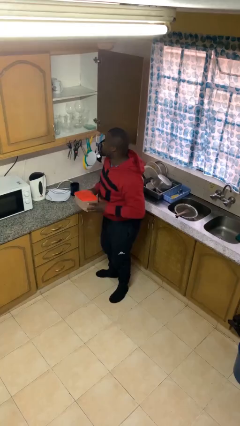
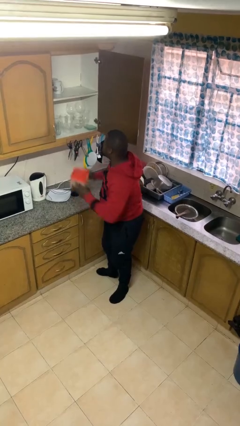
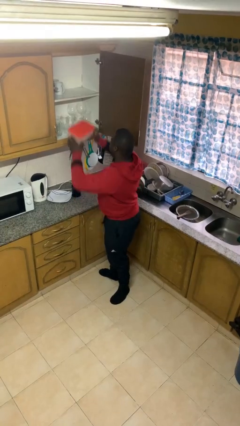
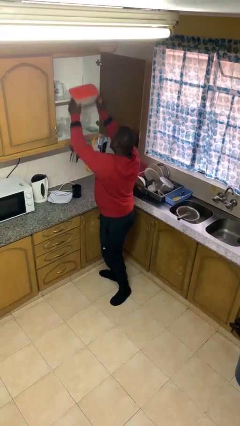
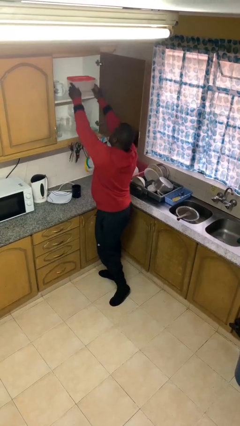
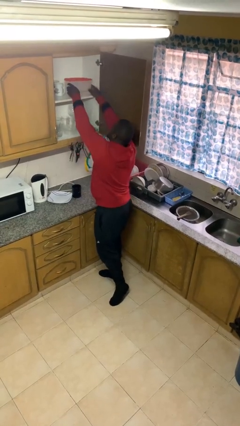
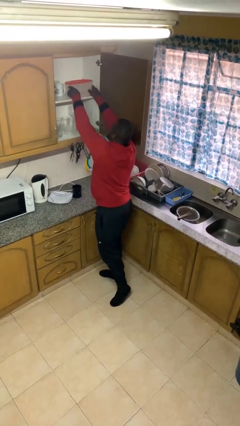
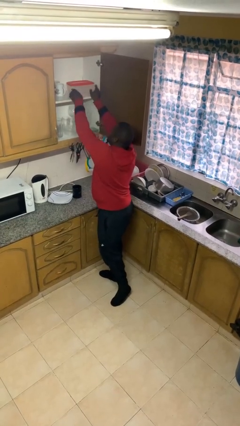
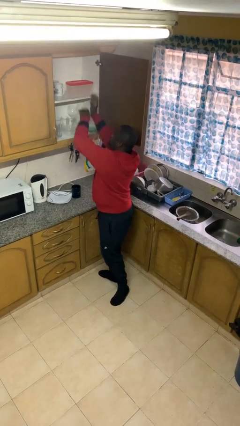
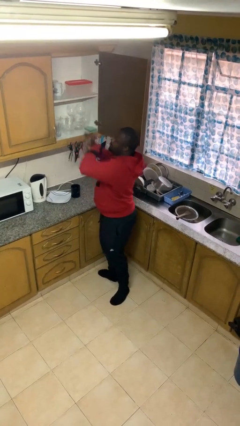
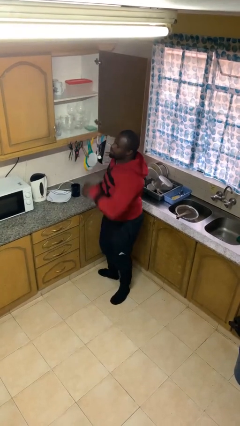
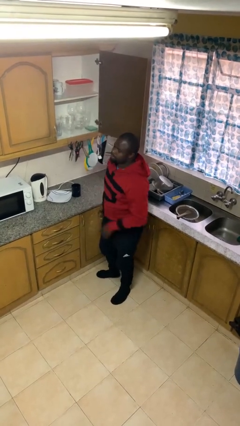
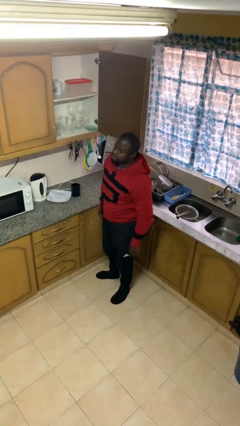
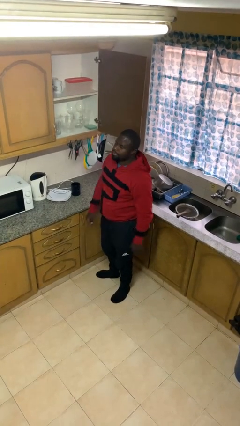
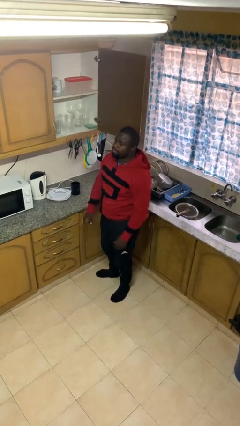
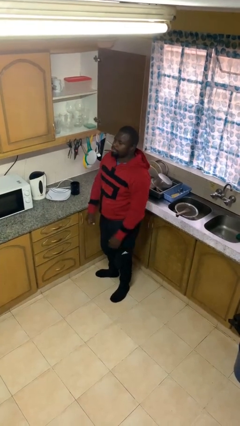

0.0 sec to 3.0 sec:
person puts down object into cabinet

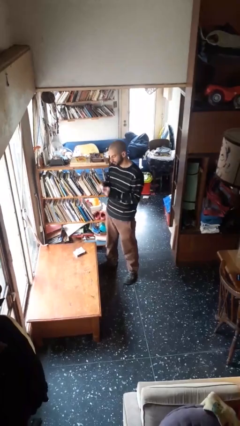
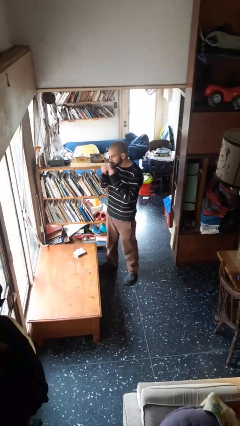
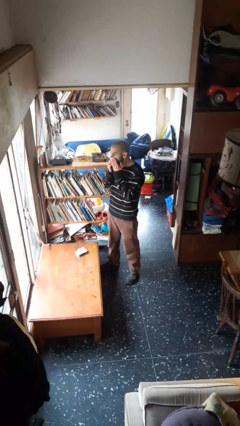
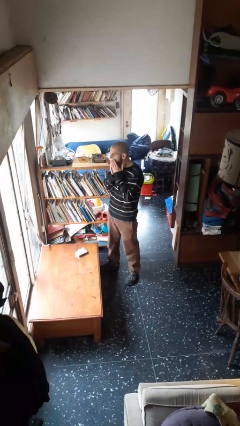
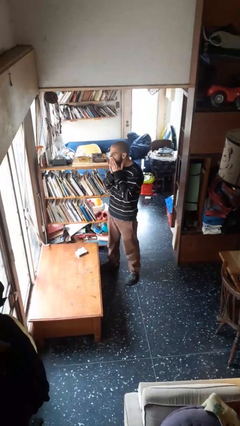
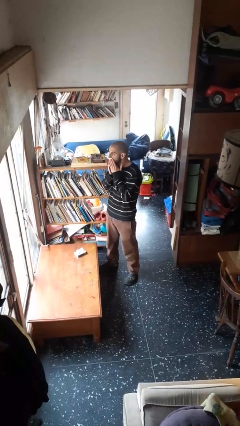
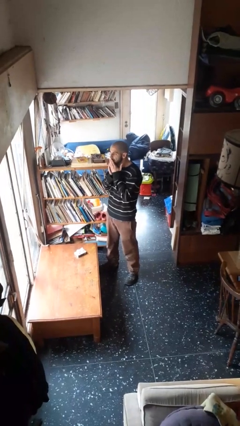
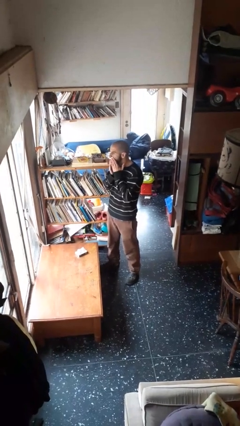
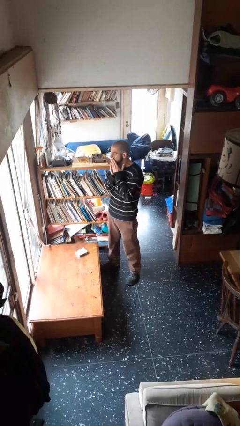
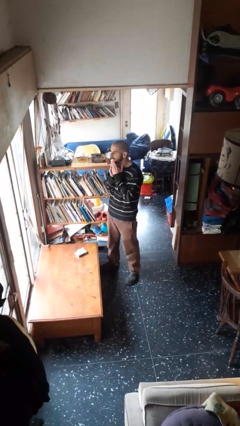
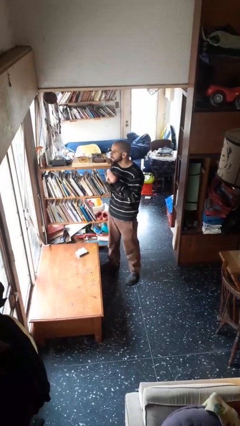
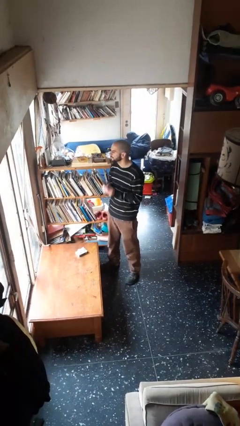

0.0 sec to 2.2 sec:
person wipes mouth with napkin

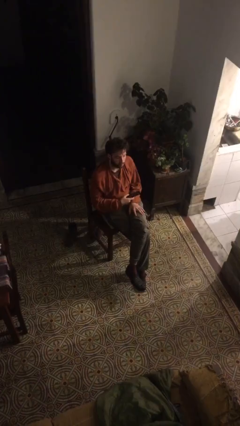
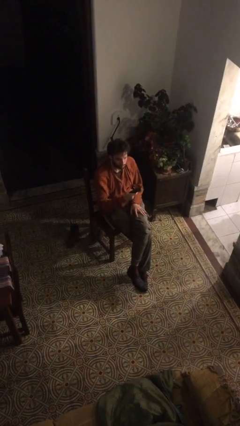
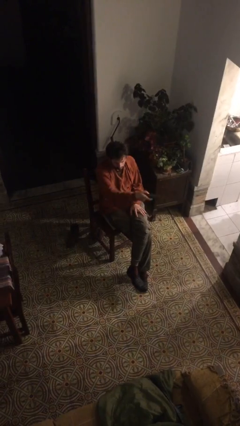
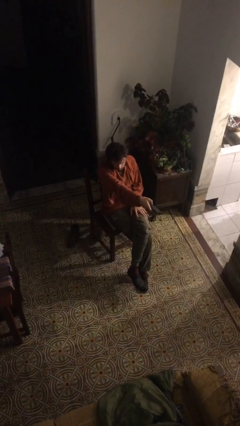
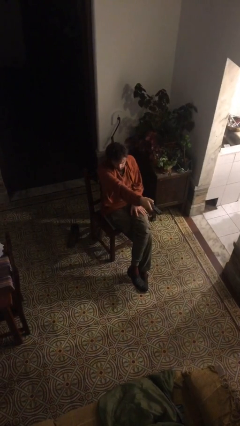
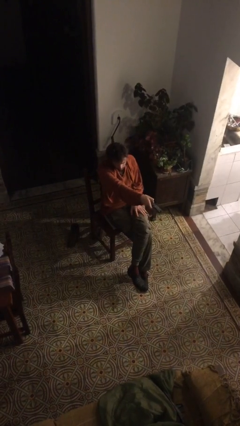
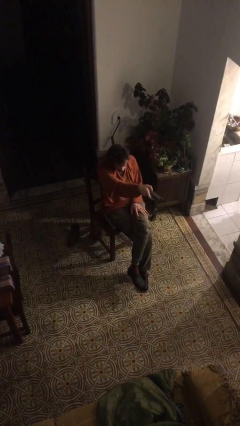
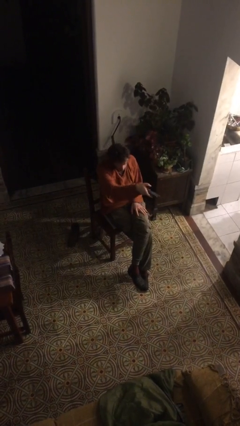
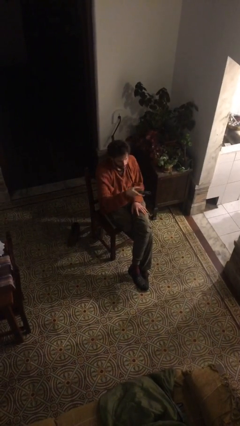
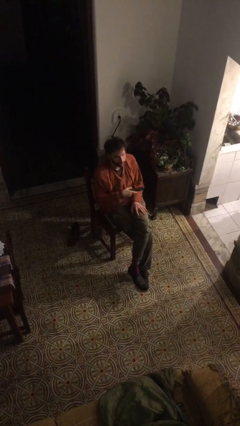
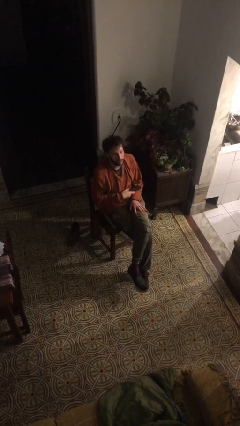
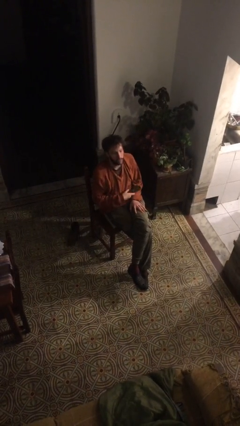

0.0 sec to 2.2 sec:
person uses television remote

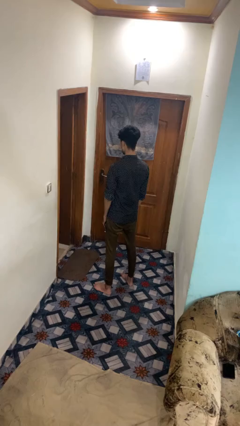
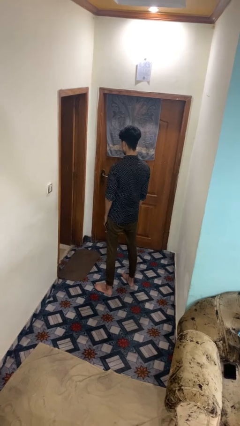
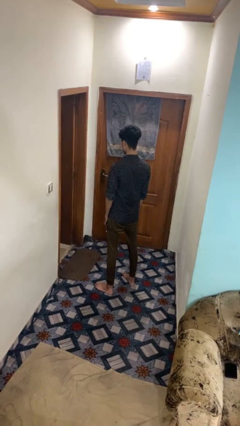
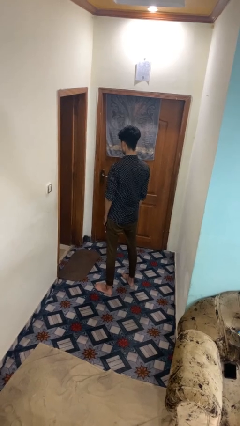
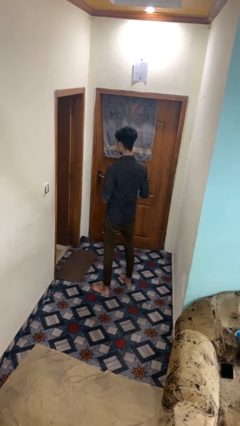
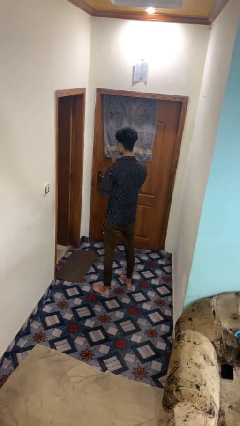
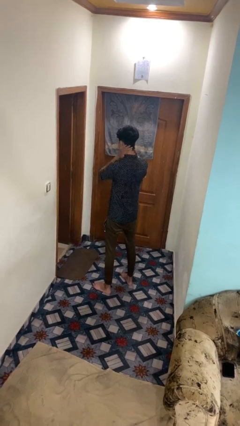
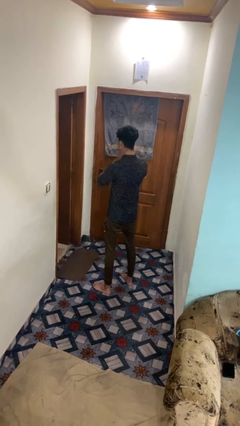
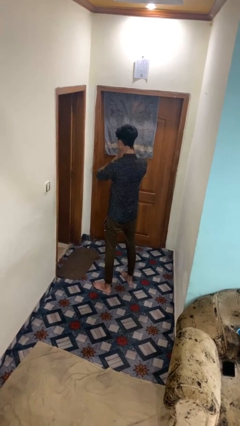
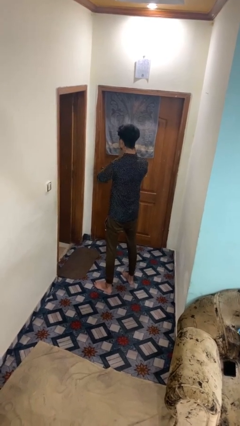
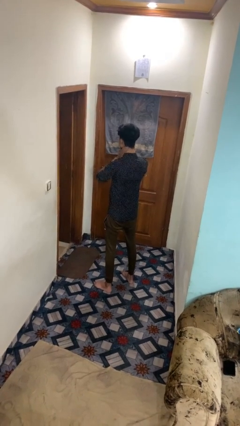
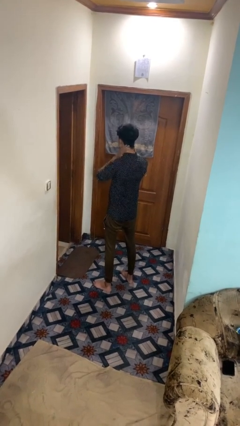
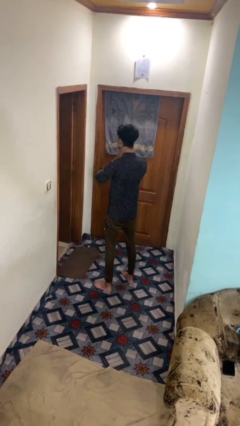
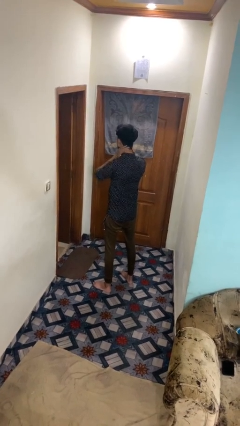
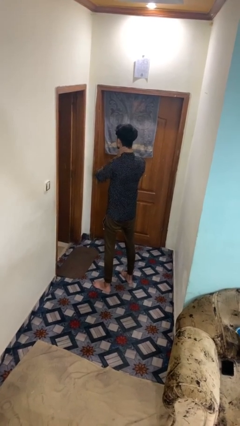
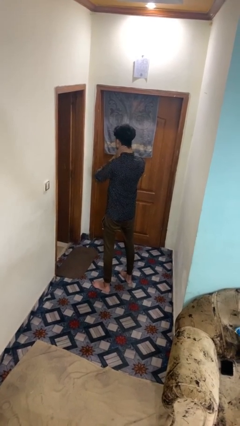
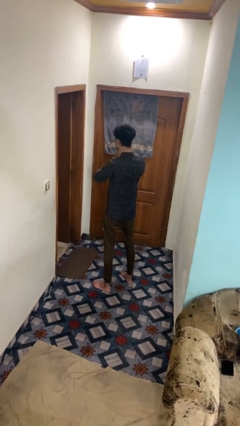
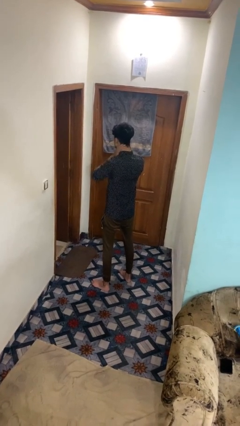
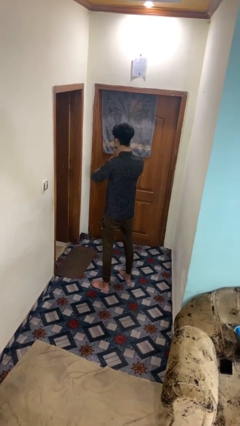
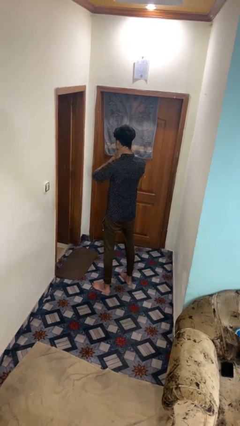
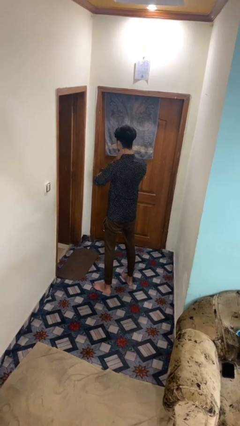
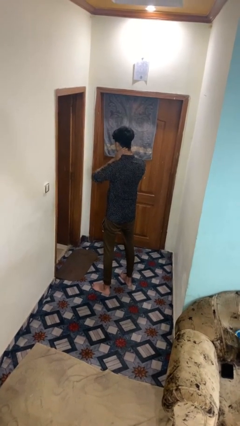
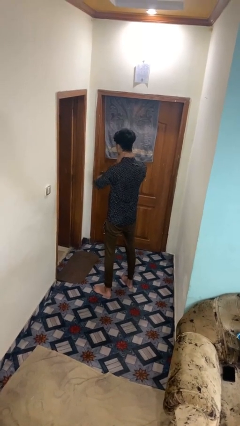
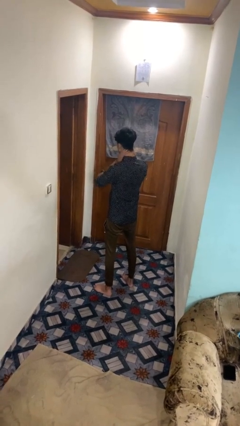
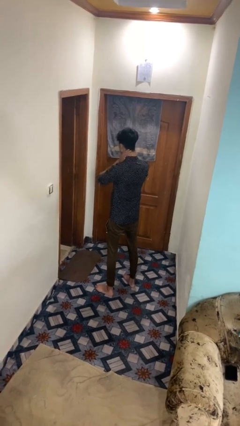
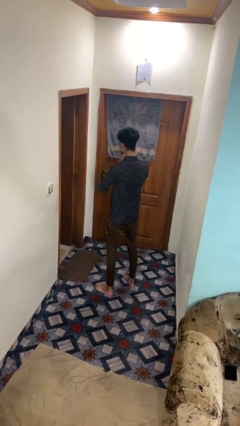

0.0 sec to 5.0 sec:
person rubs neck

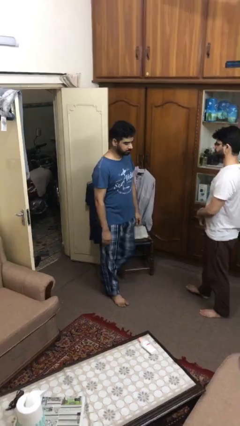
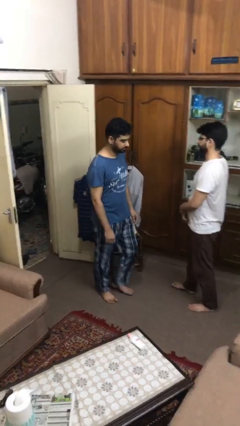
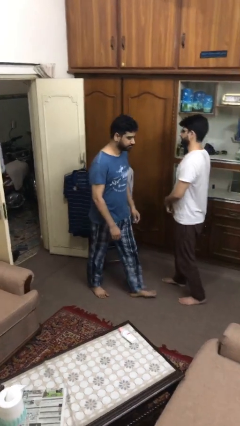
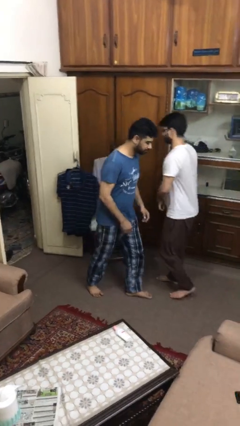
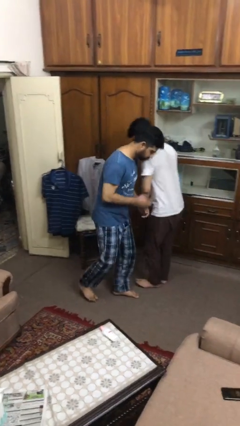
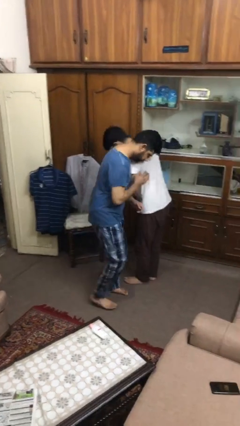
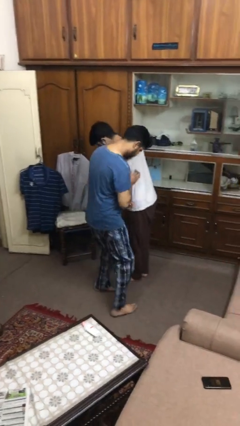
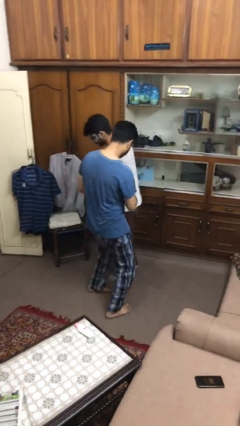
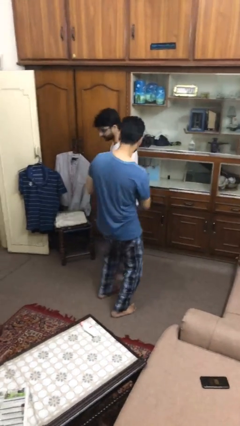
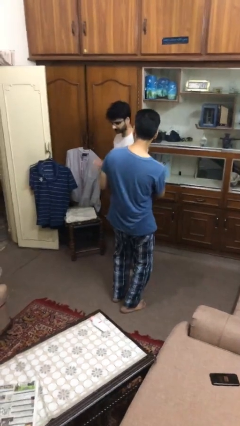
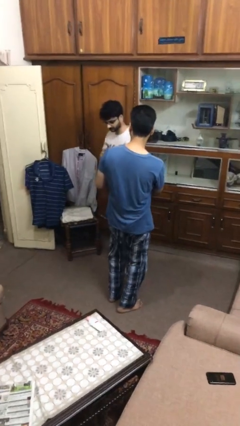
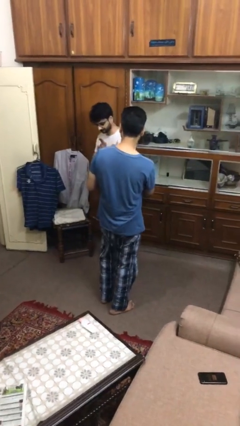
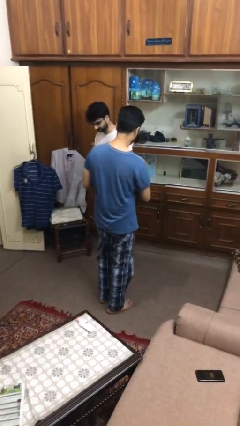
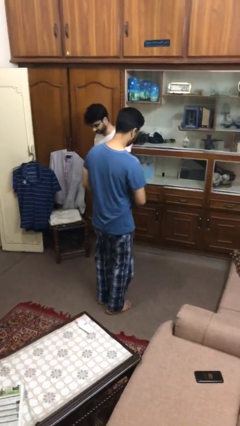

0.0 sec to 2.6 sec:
person bumps into person

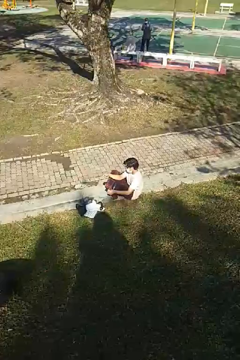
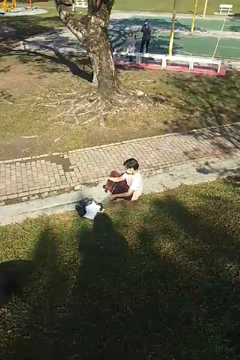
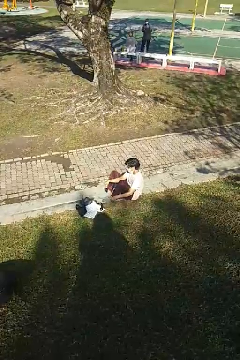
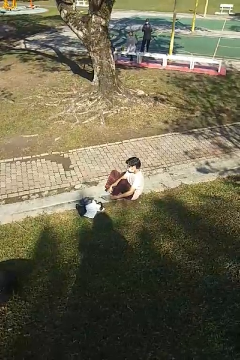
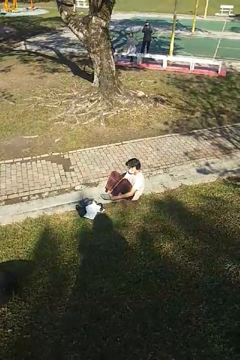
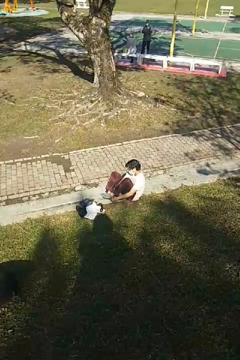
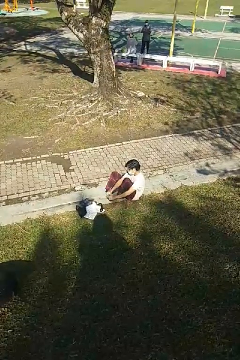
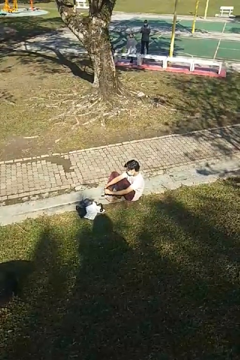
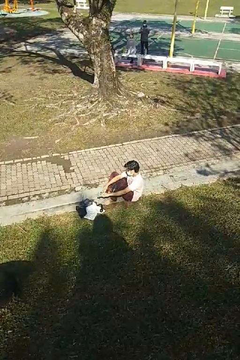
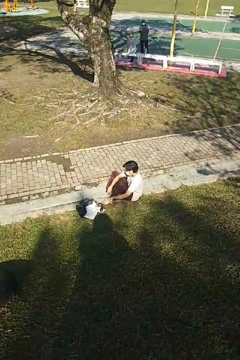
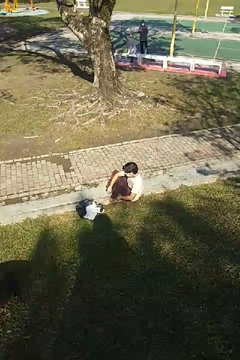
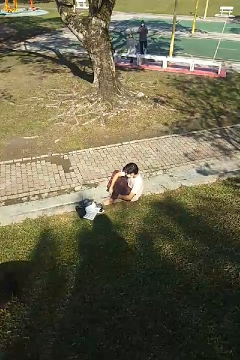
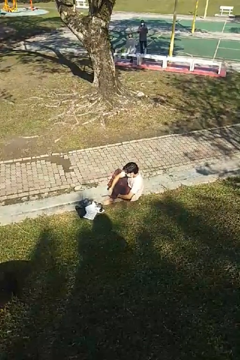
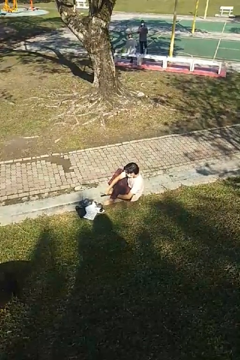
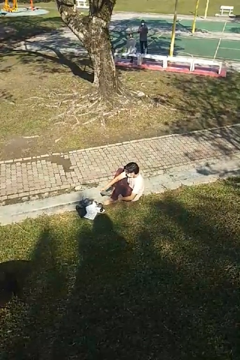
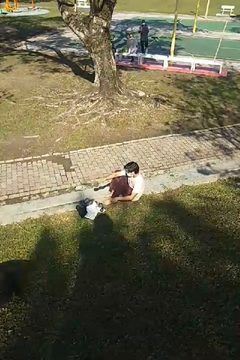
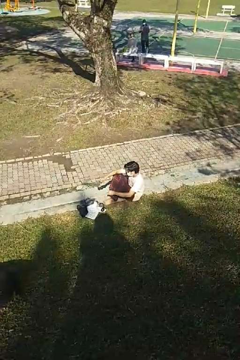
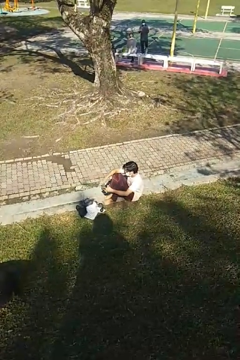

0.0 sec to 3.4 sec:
person takes off socks
